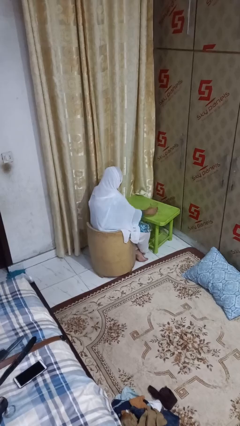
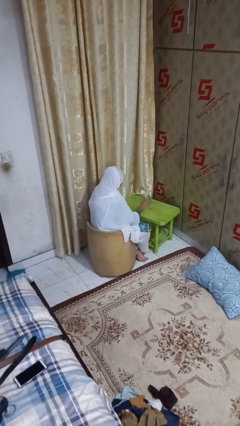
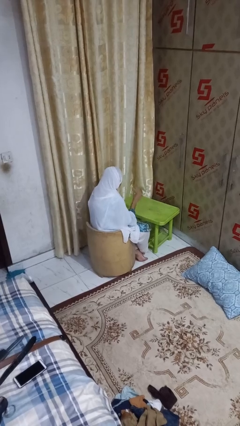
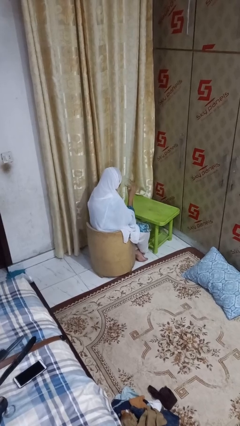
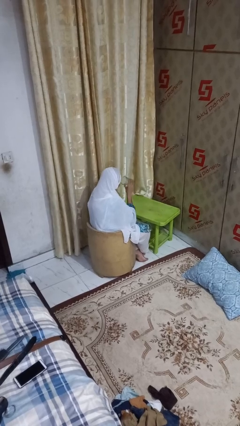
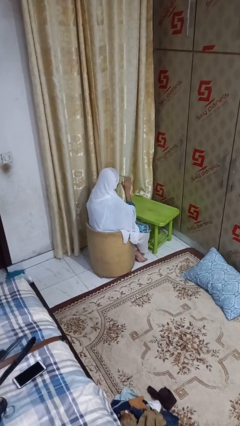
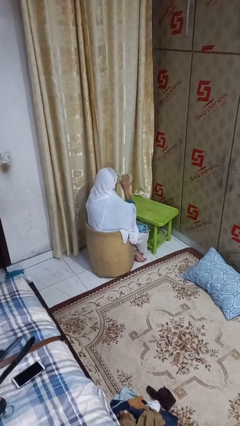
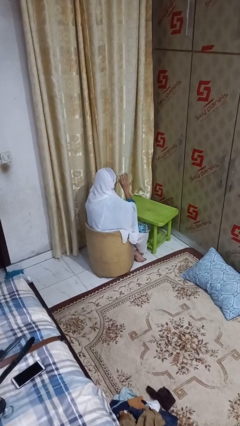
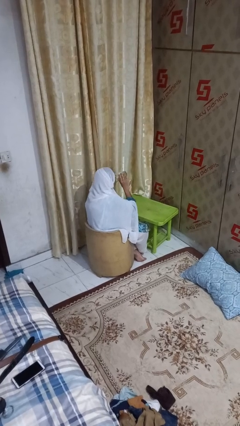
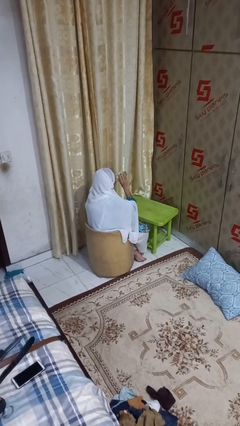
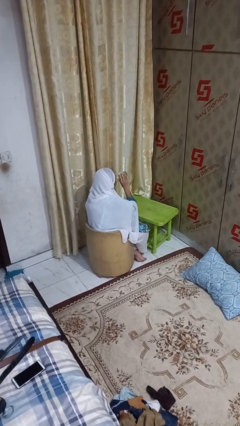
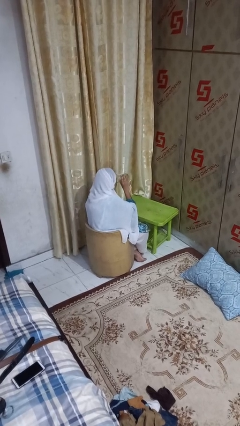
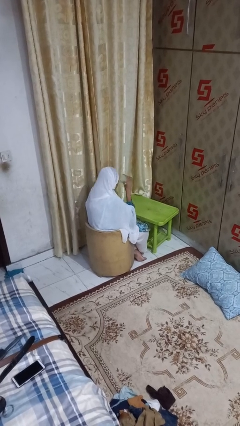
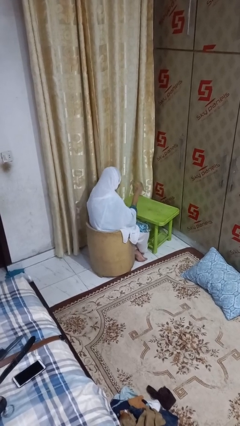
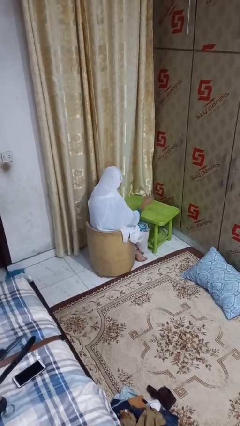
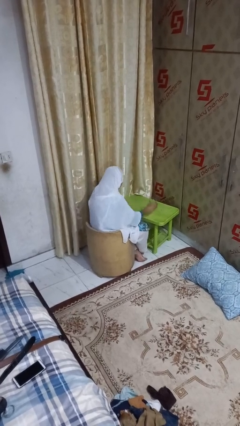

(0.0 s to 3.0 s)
person drinks from cup

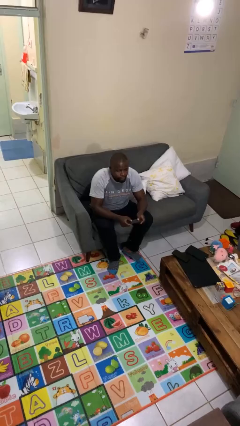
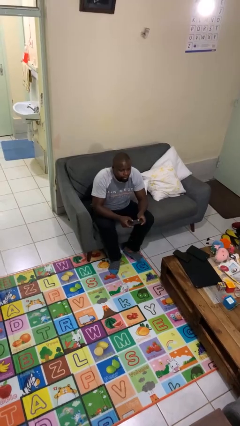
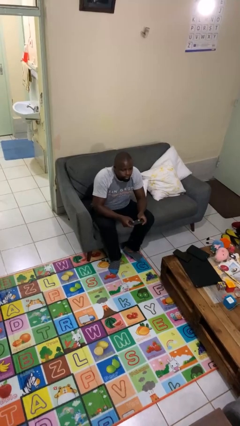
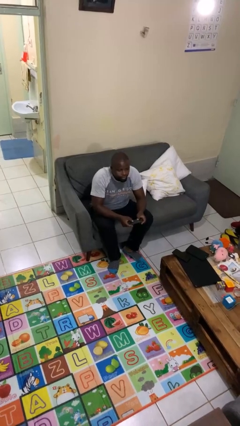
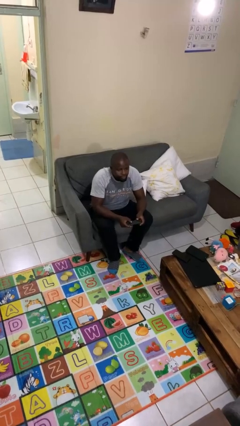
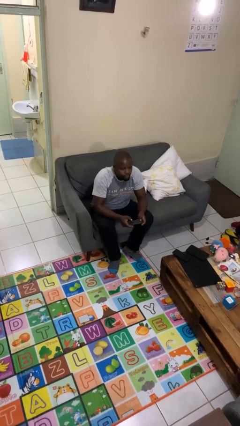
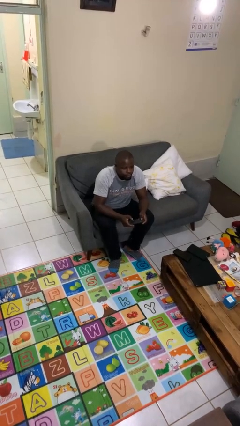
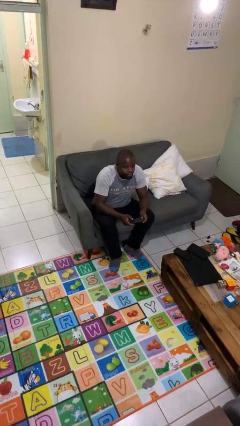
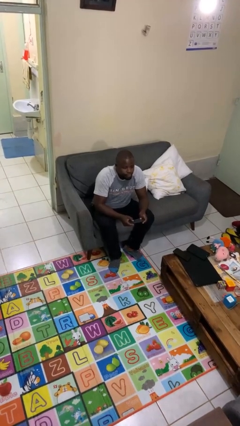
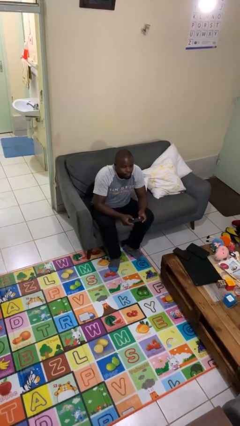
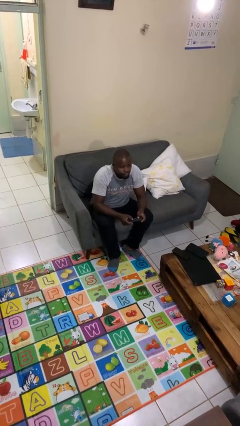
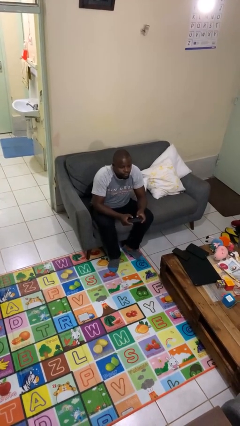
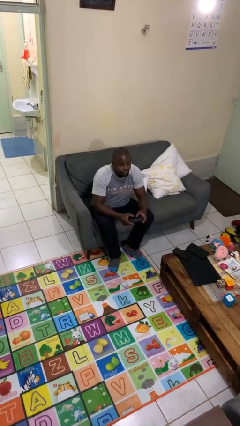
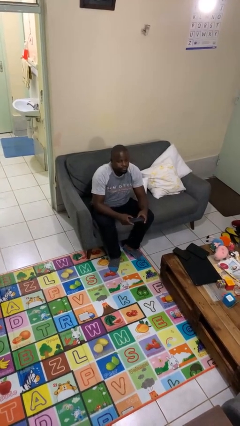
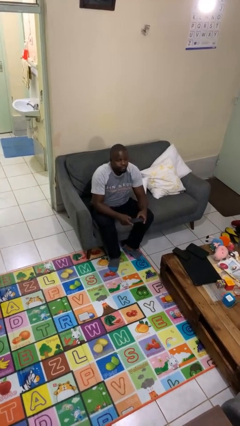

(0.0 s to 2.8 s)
person interacts with handheld game

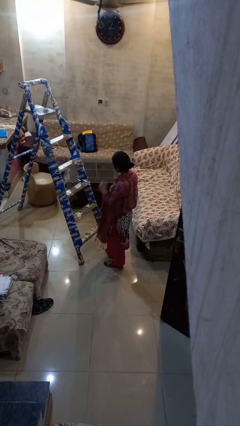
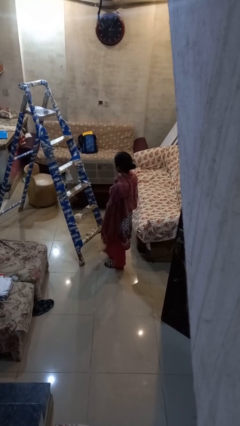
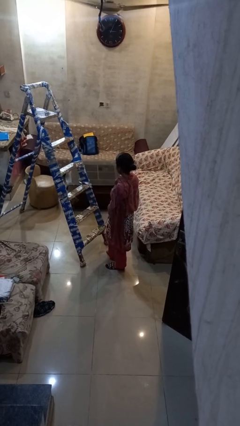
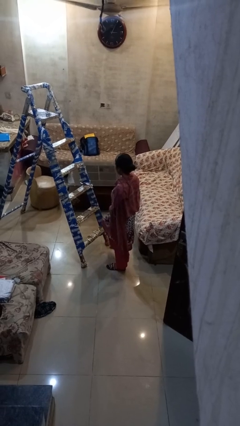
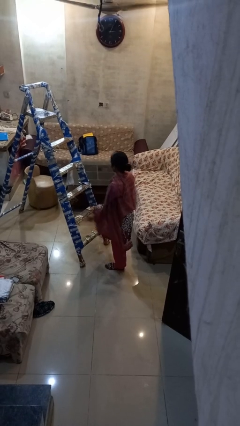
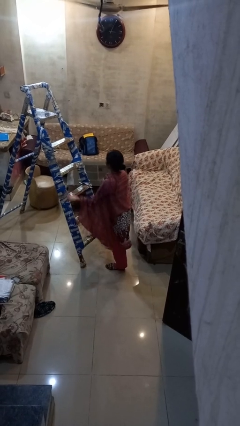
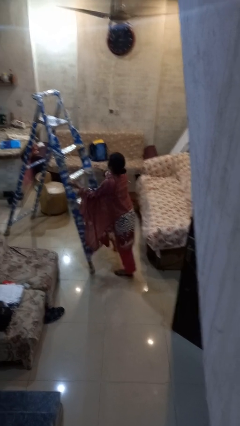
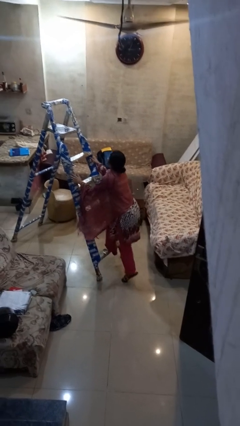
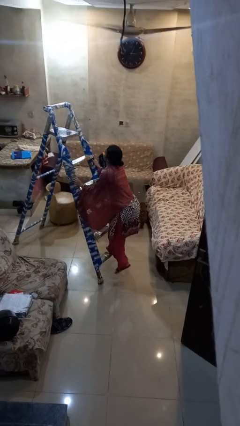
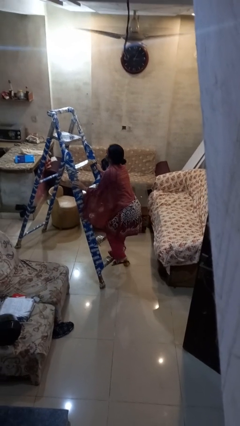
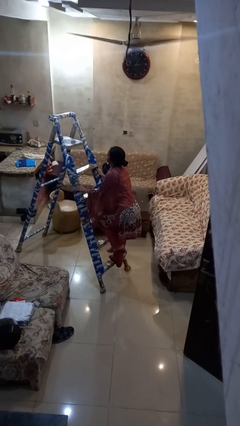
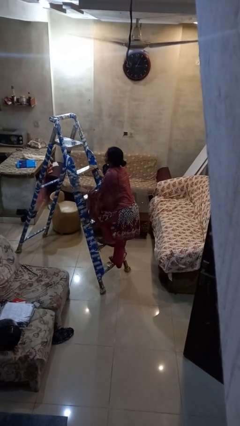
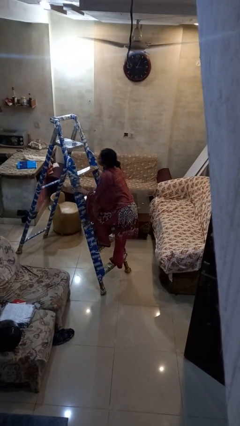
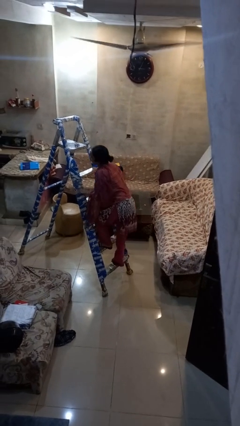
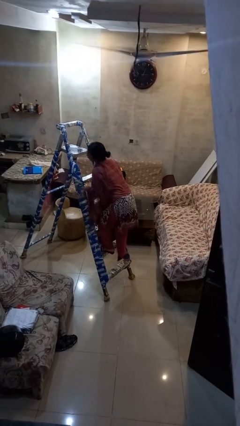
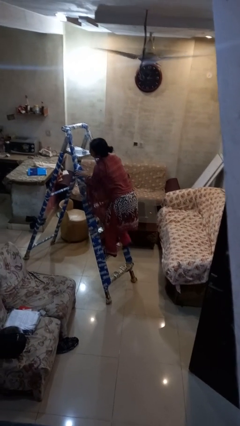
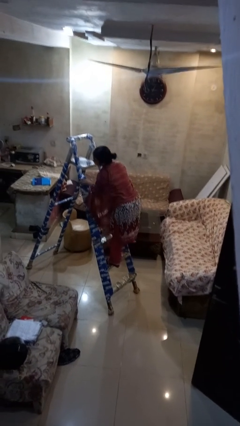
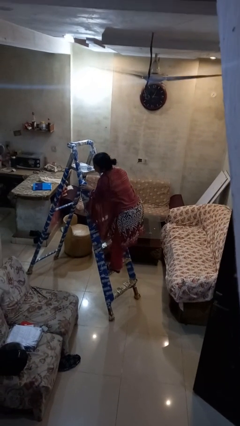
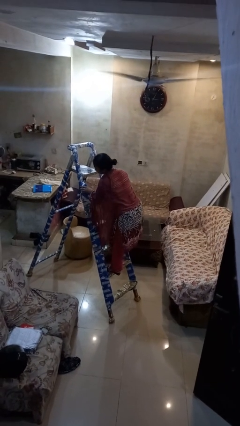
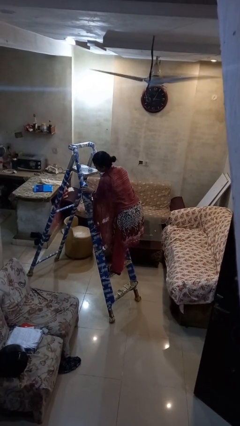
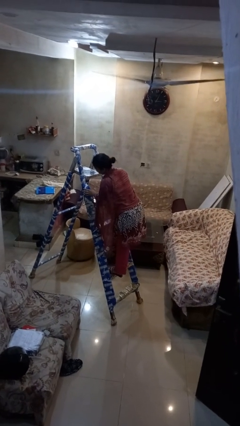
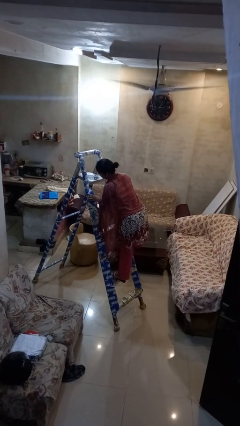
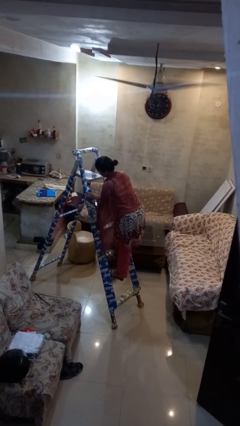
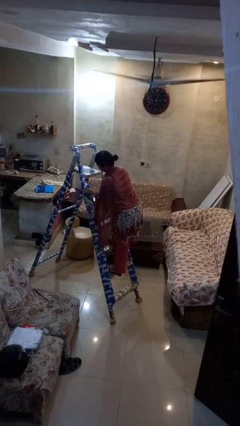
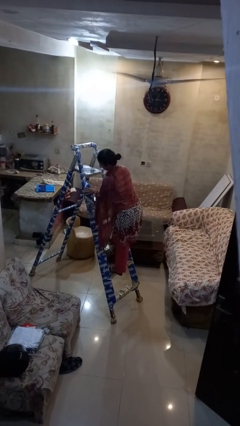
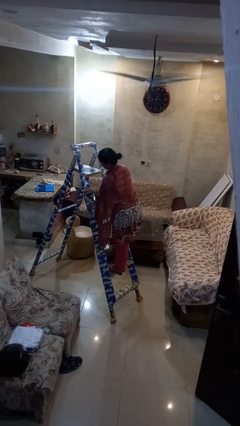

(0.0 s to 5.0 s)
person climbs up ladder

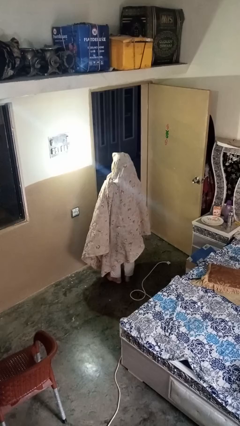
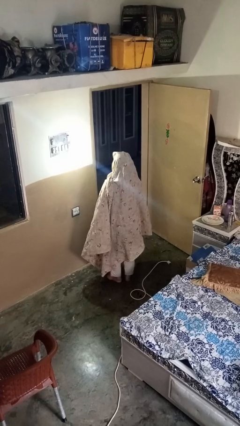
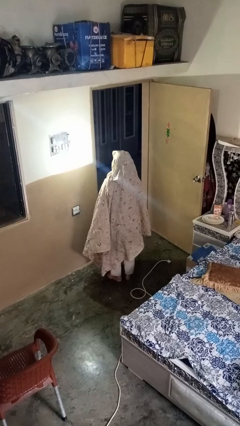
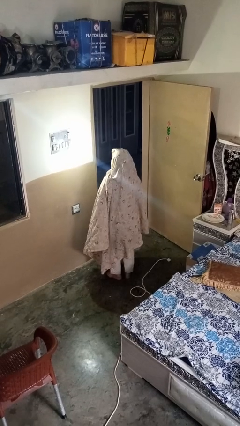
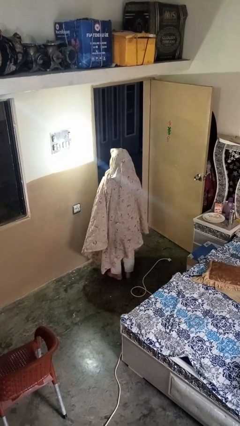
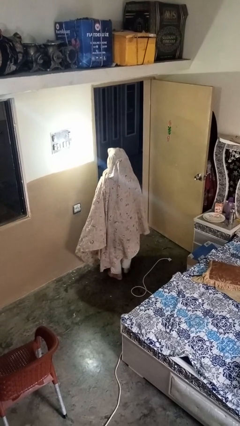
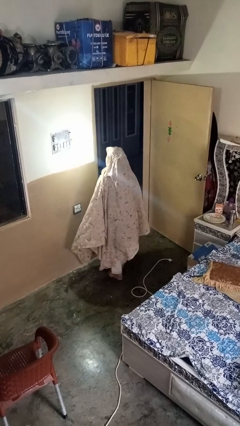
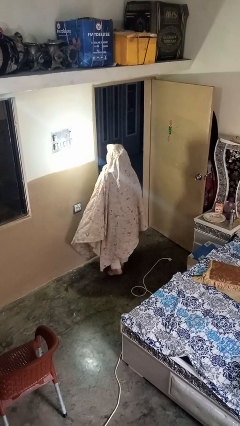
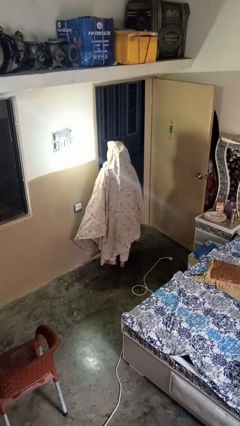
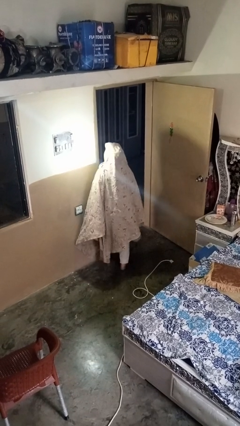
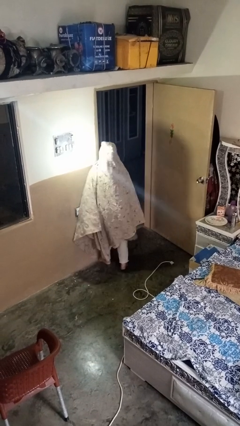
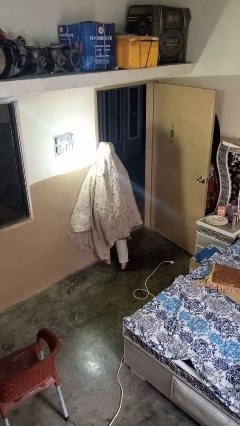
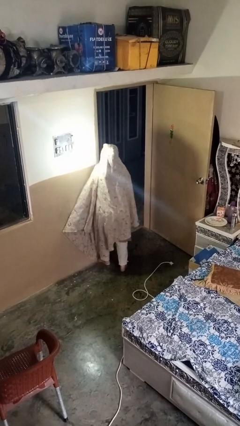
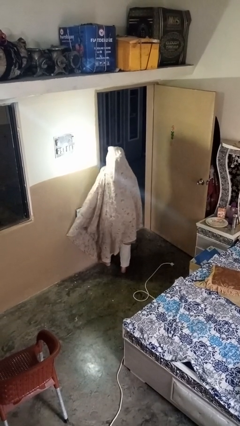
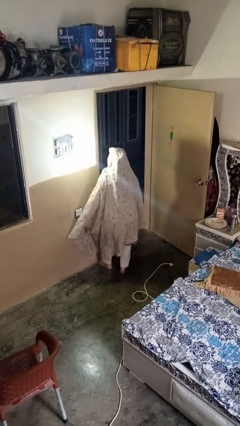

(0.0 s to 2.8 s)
person bumps into wall

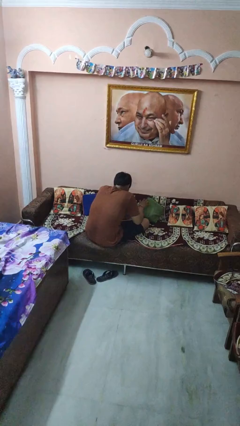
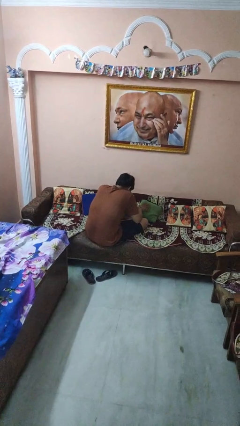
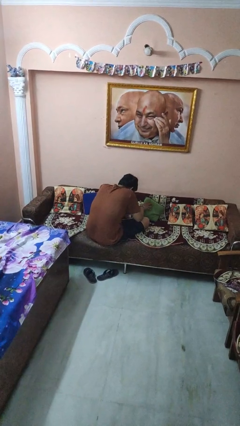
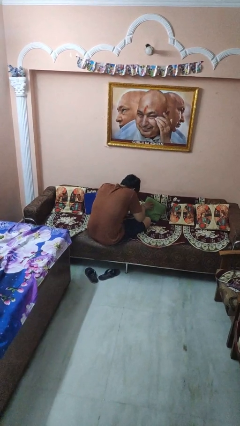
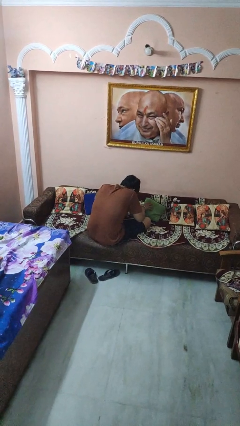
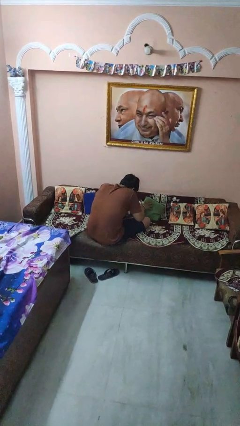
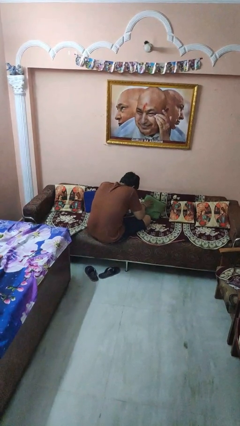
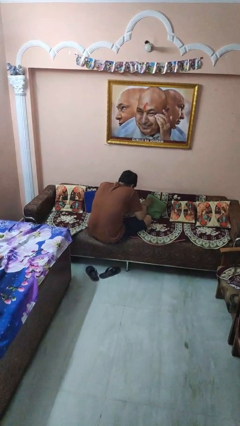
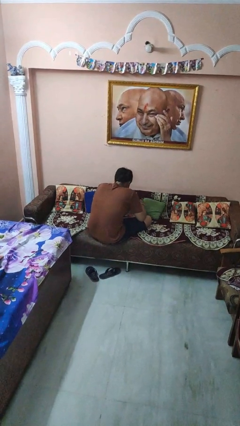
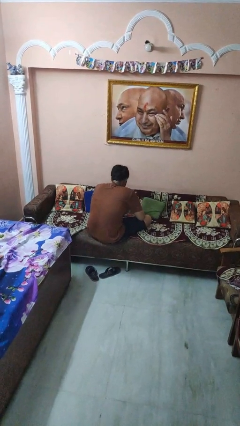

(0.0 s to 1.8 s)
person searches in couch

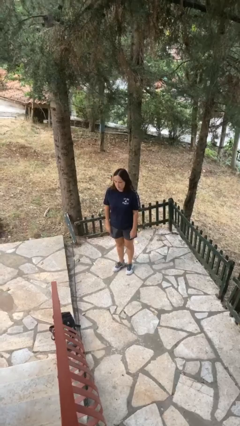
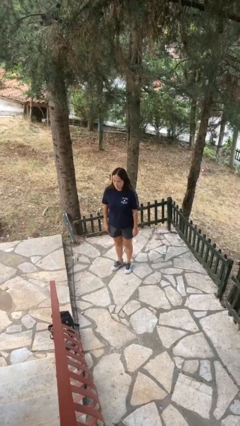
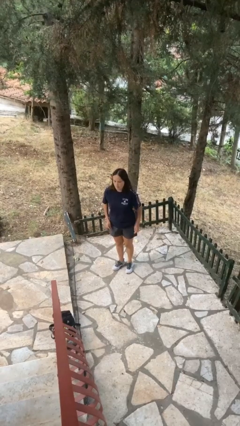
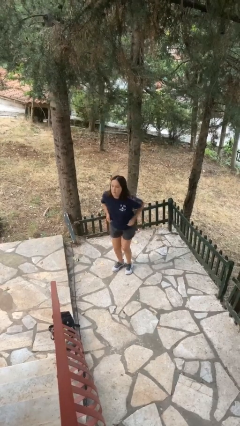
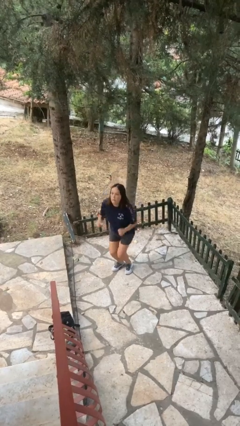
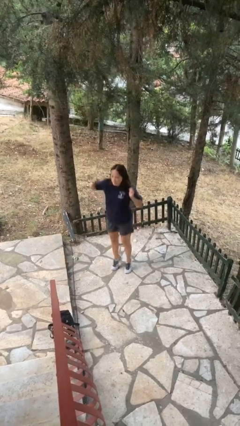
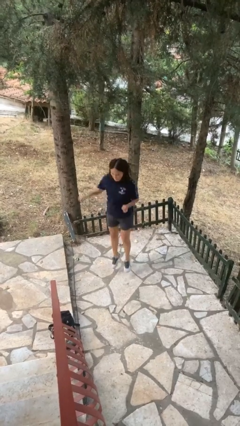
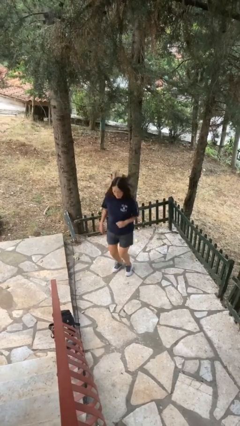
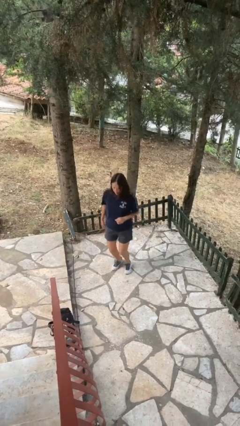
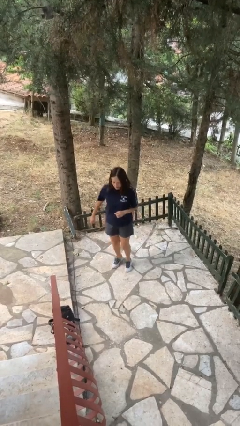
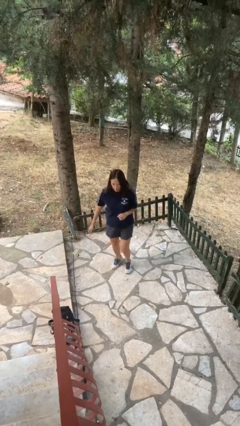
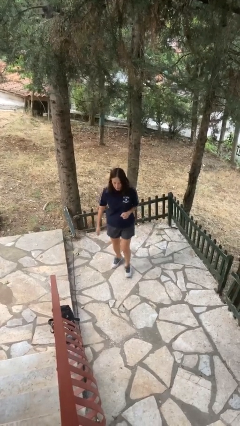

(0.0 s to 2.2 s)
person jumps
